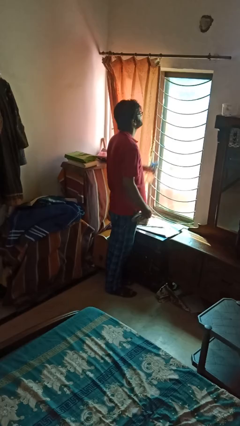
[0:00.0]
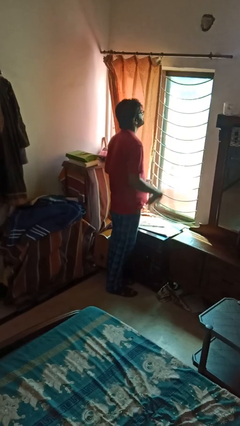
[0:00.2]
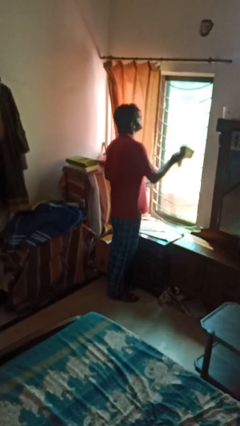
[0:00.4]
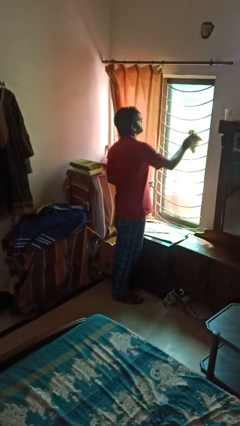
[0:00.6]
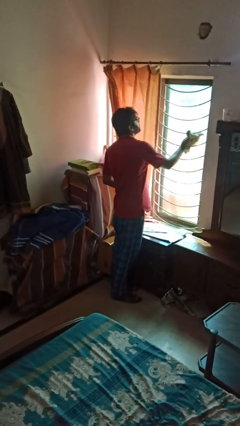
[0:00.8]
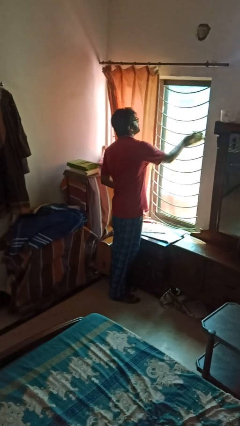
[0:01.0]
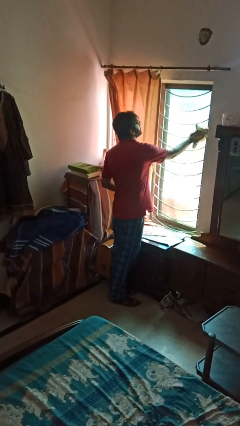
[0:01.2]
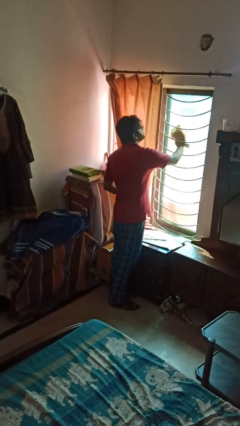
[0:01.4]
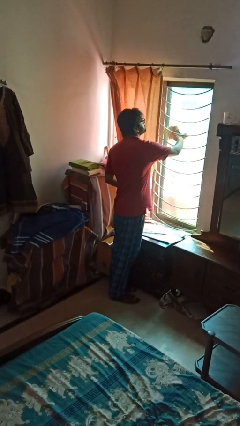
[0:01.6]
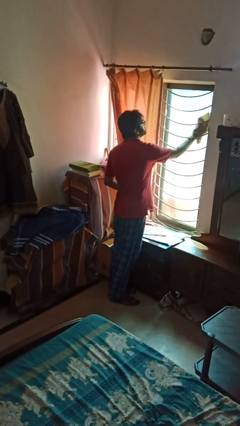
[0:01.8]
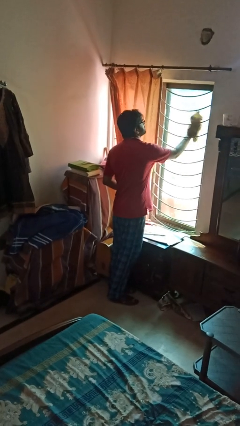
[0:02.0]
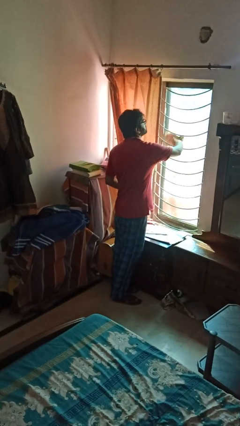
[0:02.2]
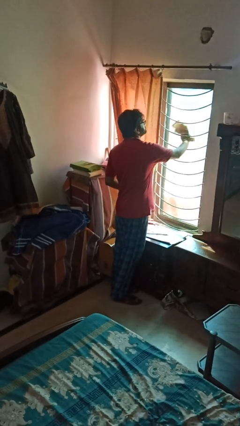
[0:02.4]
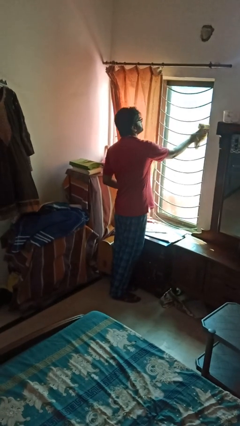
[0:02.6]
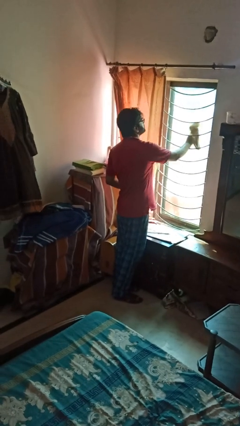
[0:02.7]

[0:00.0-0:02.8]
person washes window

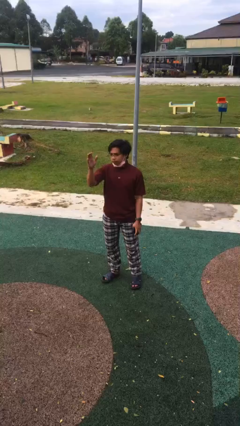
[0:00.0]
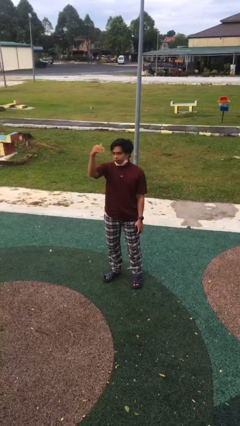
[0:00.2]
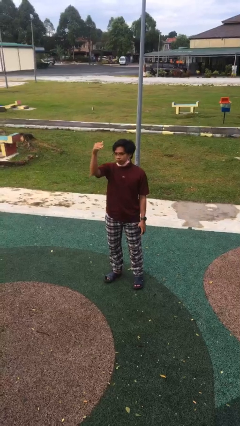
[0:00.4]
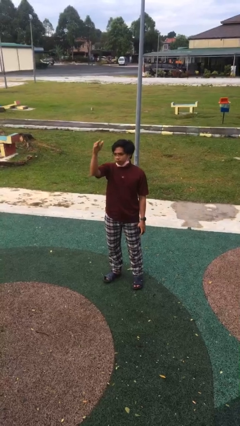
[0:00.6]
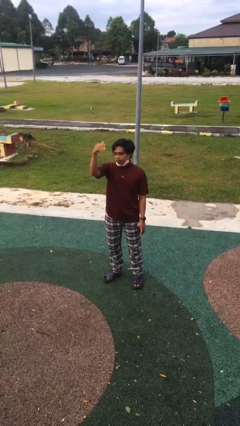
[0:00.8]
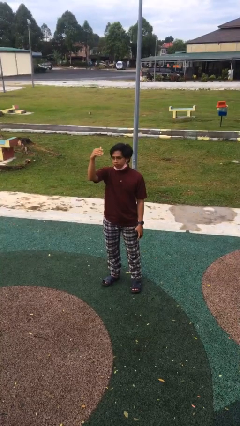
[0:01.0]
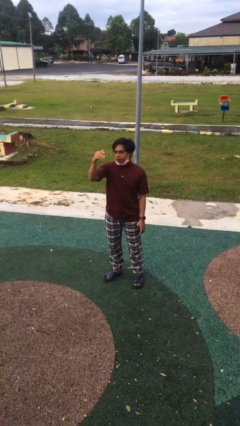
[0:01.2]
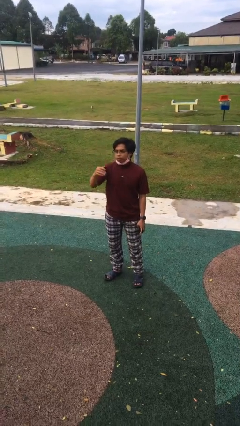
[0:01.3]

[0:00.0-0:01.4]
person gestures come here

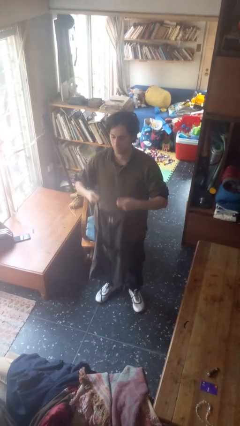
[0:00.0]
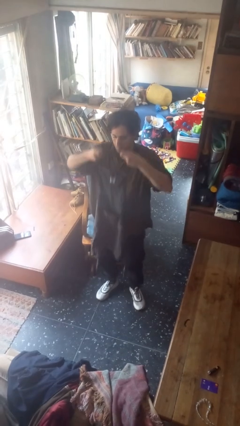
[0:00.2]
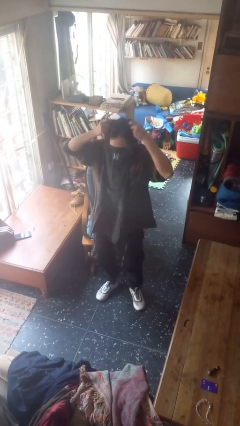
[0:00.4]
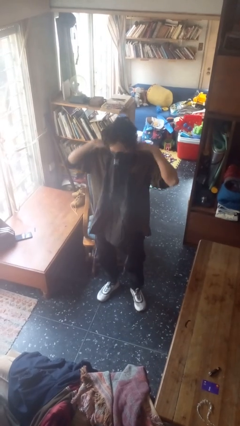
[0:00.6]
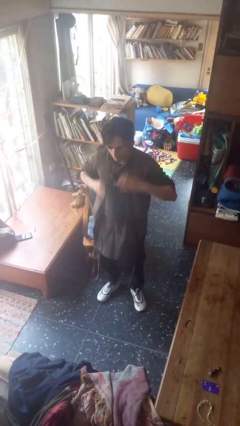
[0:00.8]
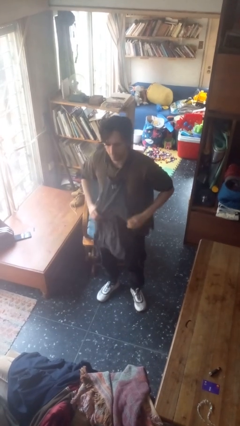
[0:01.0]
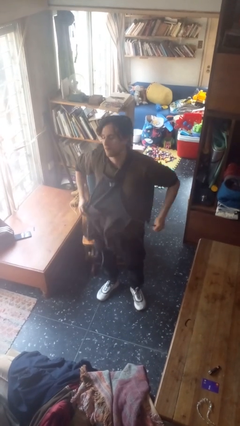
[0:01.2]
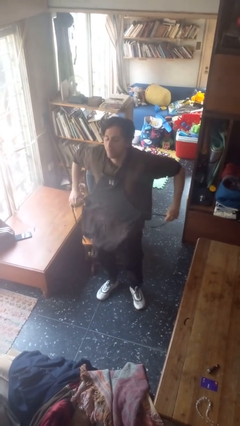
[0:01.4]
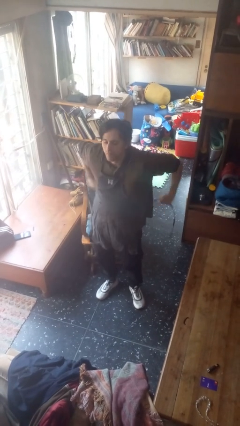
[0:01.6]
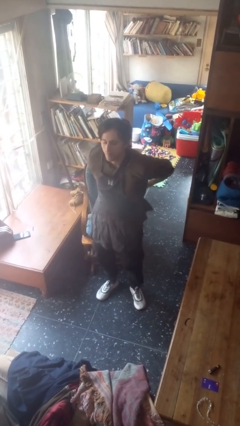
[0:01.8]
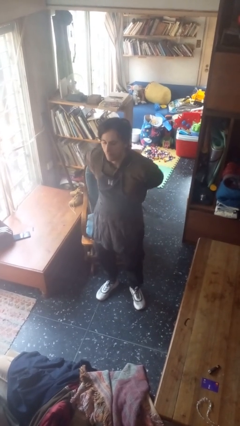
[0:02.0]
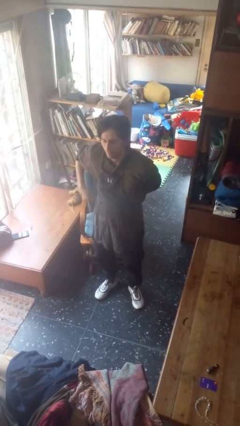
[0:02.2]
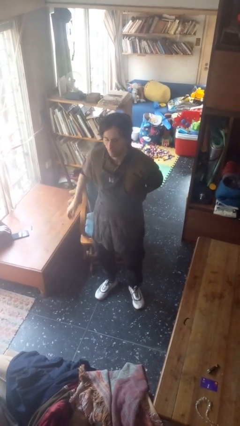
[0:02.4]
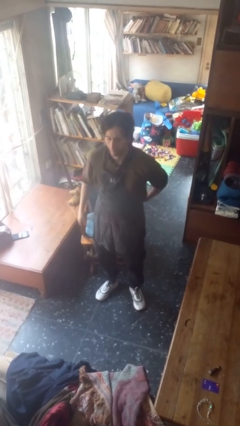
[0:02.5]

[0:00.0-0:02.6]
person puts on apron

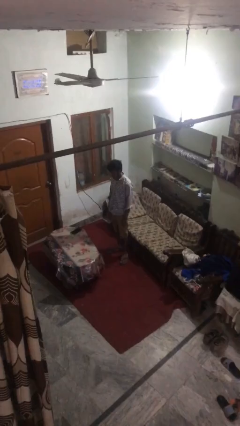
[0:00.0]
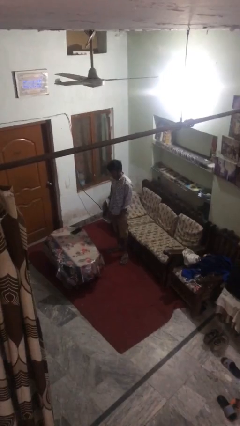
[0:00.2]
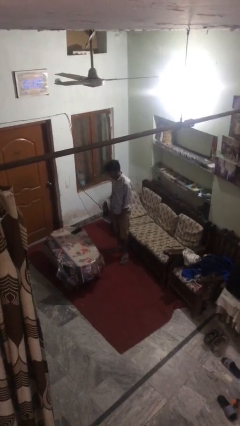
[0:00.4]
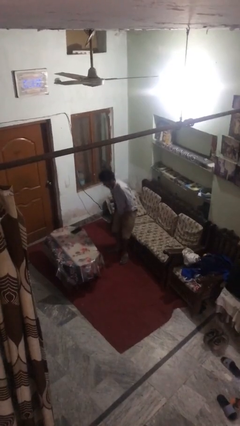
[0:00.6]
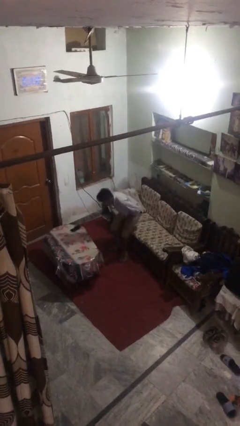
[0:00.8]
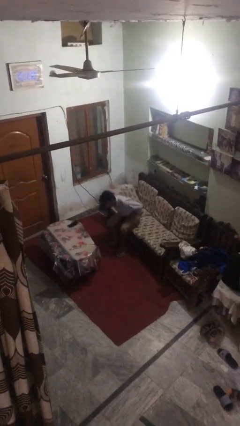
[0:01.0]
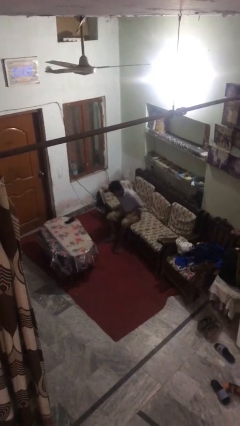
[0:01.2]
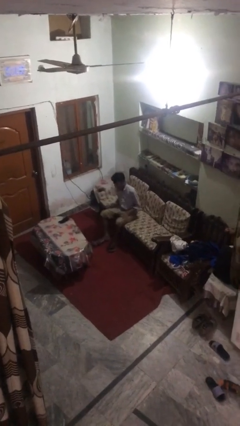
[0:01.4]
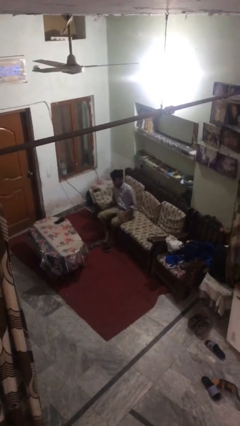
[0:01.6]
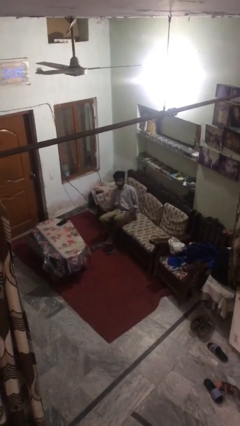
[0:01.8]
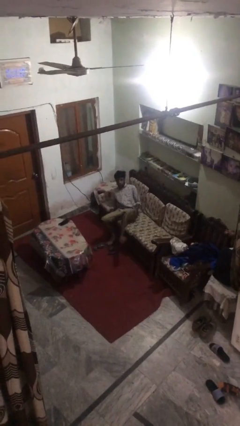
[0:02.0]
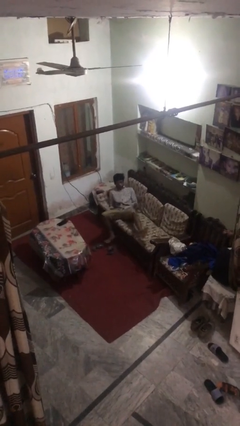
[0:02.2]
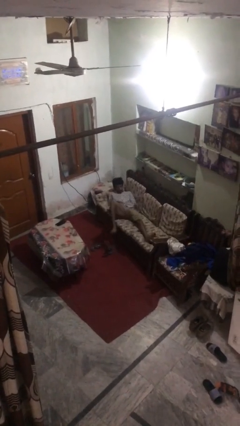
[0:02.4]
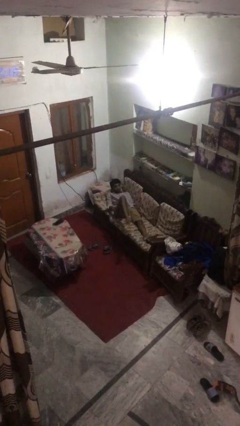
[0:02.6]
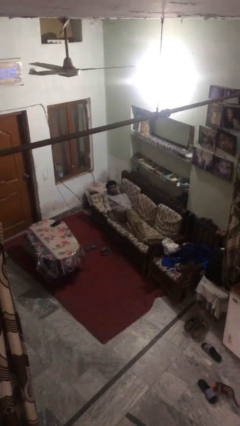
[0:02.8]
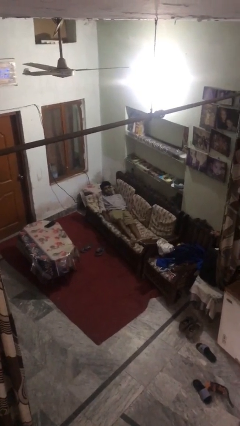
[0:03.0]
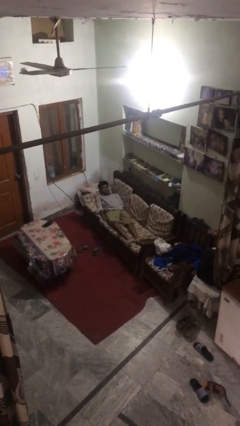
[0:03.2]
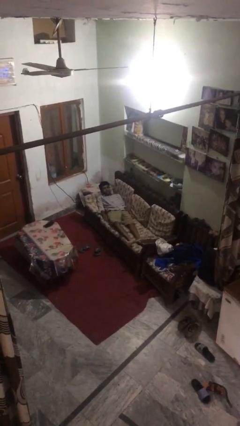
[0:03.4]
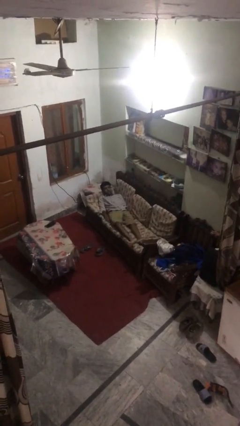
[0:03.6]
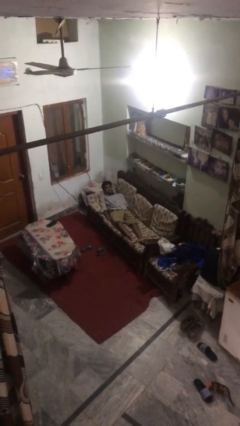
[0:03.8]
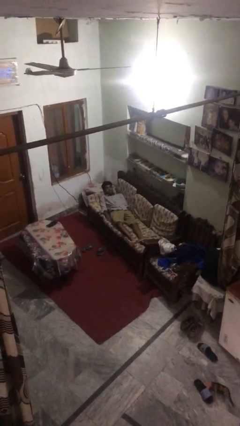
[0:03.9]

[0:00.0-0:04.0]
person lies down on couch

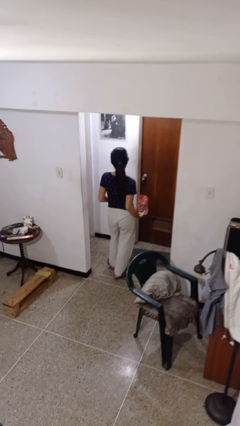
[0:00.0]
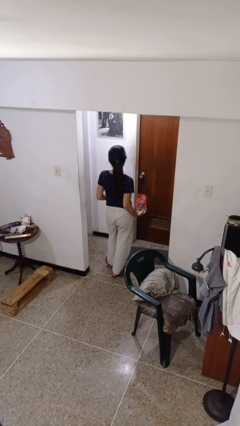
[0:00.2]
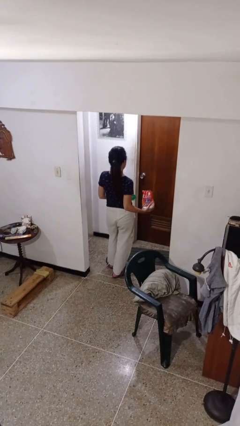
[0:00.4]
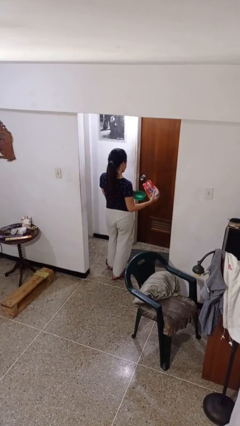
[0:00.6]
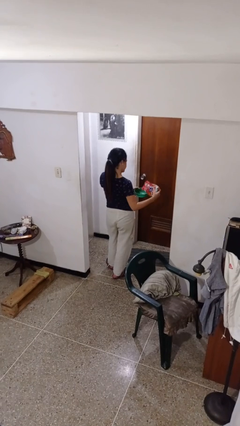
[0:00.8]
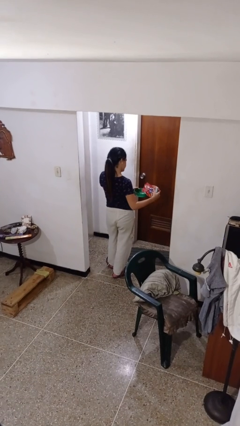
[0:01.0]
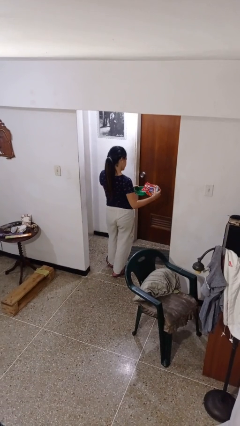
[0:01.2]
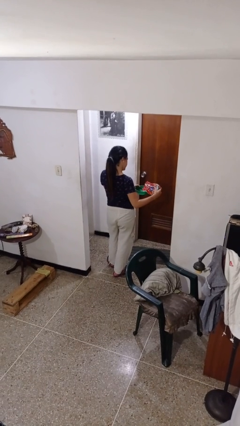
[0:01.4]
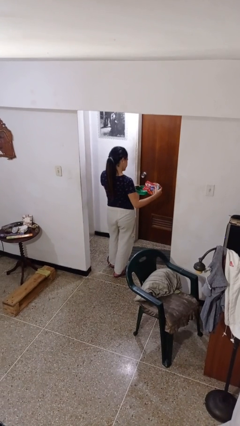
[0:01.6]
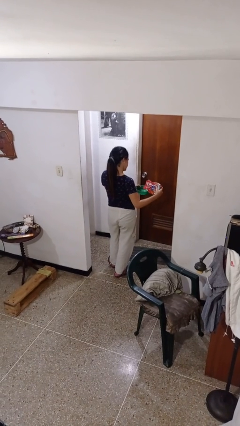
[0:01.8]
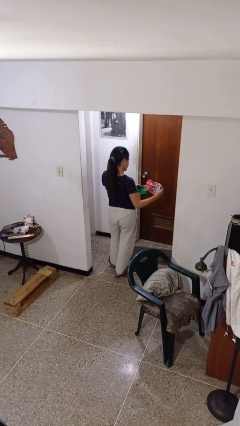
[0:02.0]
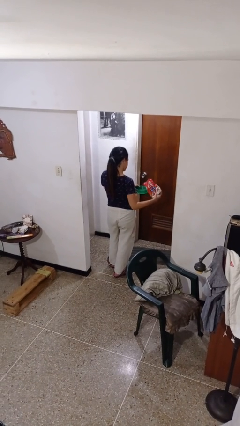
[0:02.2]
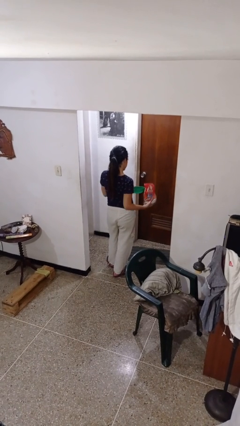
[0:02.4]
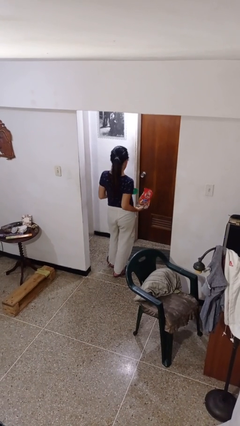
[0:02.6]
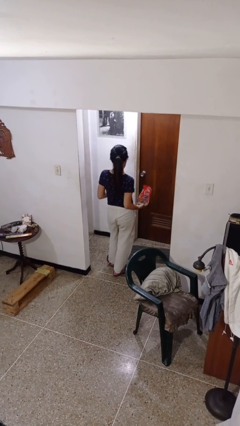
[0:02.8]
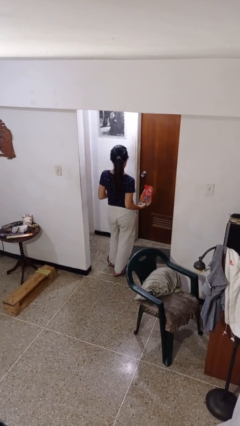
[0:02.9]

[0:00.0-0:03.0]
person pours into bowl

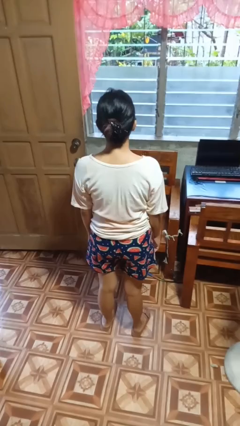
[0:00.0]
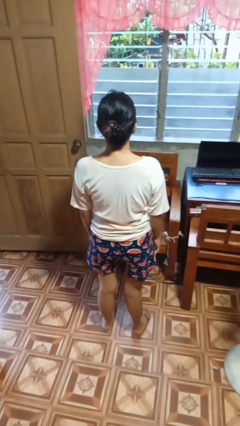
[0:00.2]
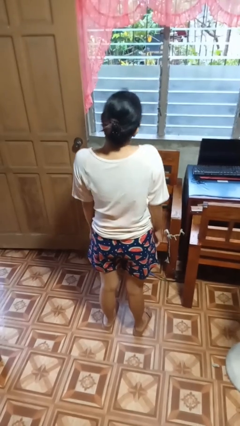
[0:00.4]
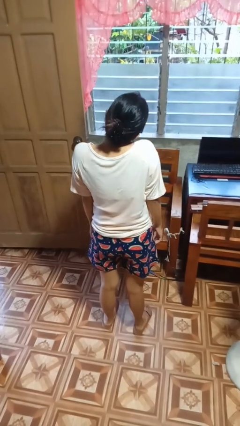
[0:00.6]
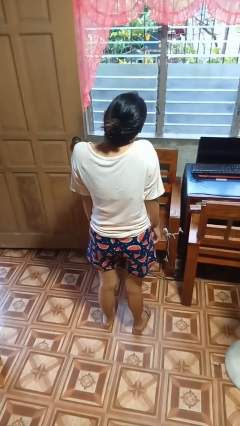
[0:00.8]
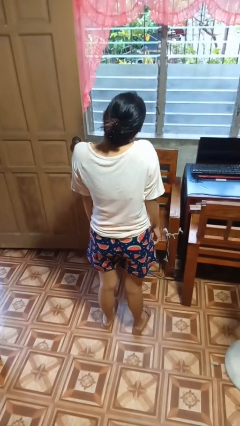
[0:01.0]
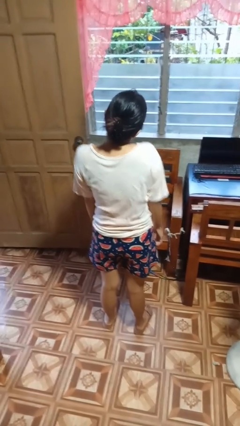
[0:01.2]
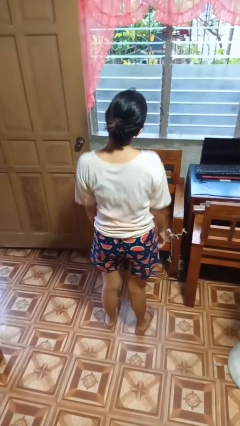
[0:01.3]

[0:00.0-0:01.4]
person shrugs

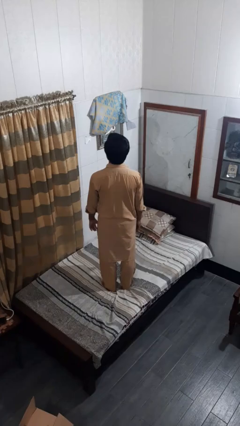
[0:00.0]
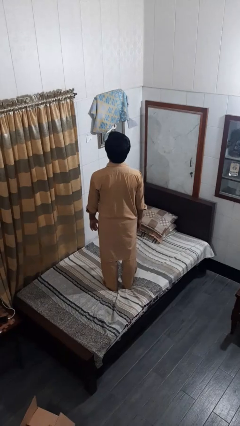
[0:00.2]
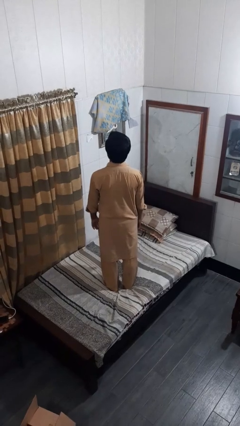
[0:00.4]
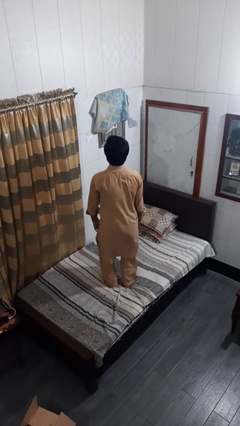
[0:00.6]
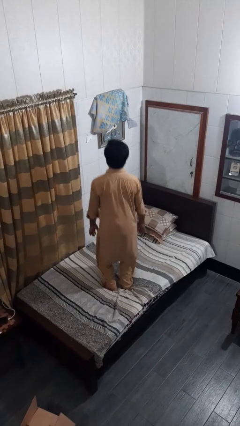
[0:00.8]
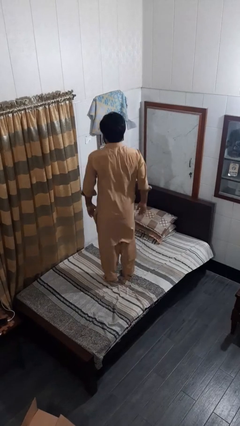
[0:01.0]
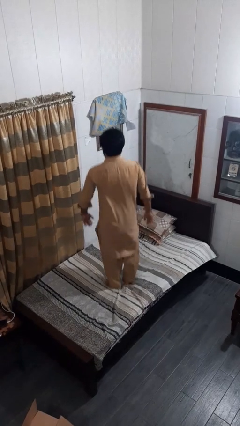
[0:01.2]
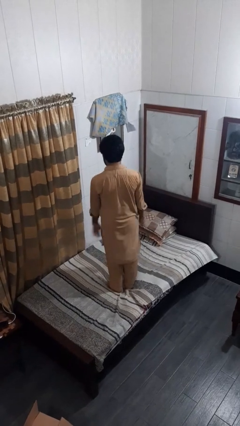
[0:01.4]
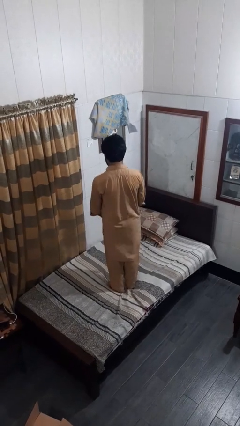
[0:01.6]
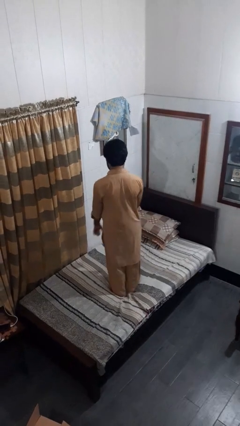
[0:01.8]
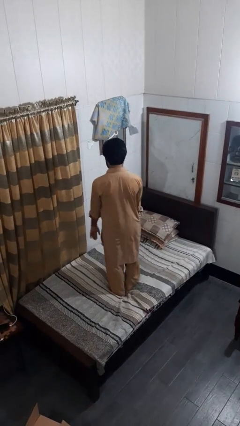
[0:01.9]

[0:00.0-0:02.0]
person jumps on bed
